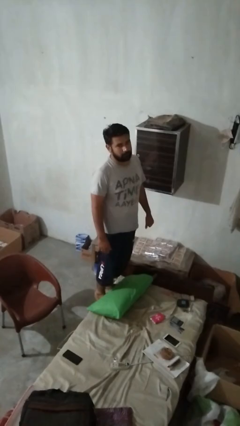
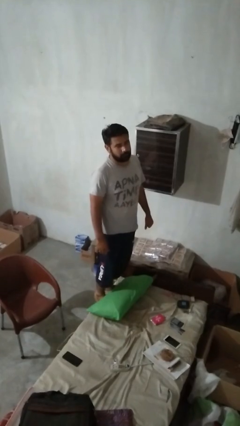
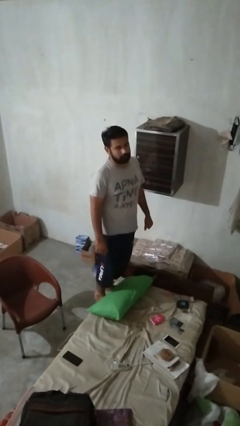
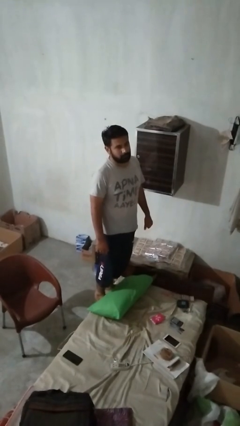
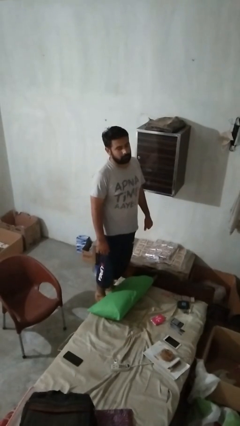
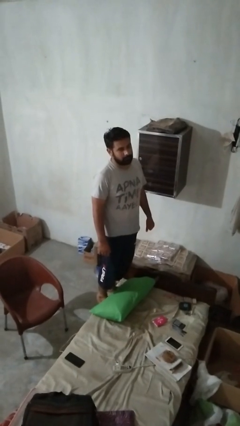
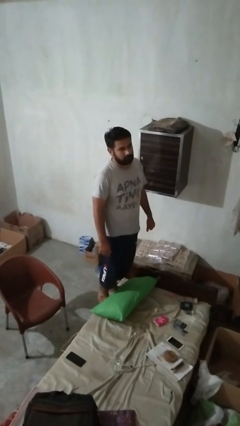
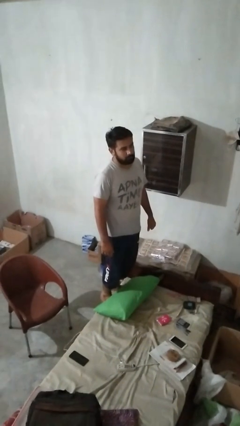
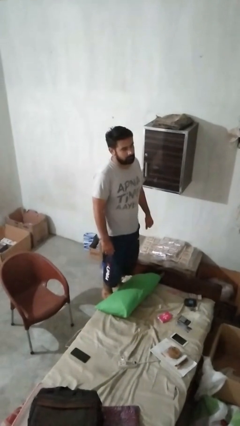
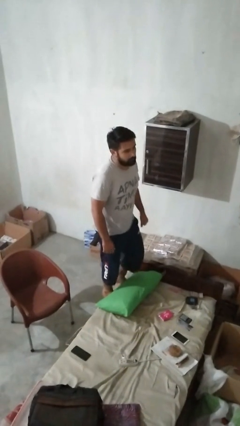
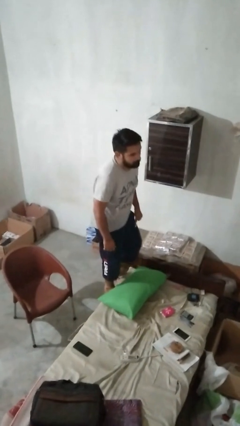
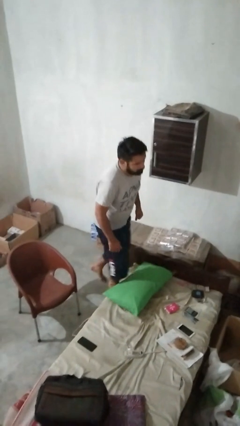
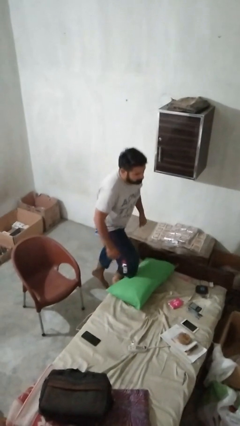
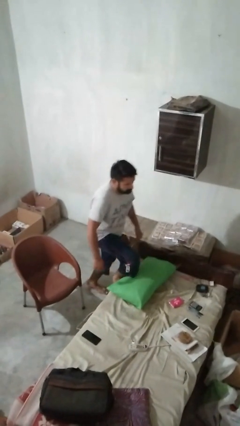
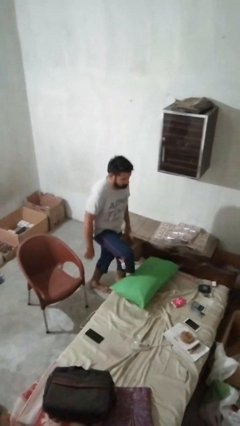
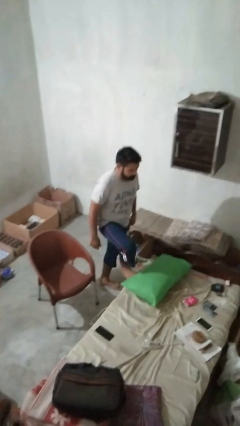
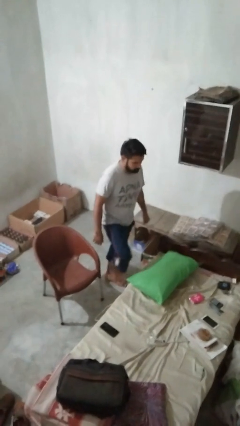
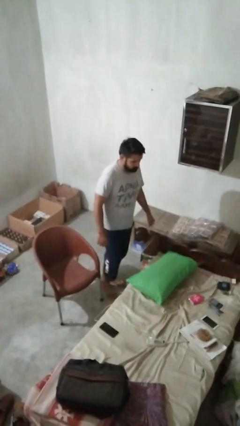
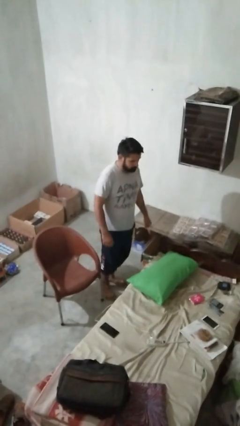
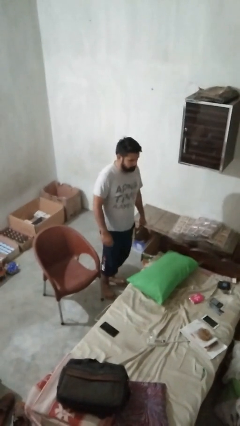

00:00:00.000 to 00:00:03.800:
person climbs off couch

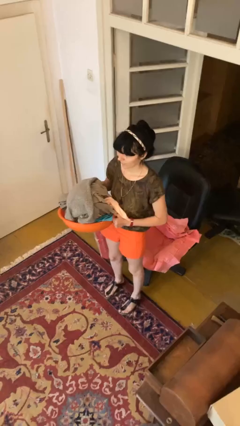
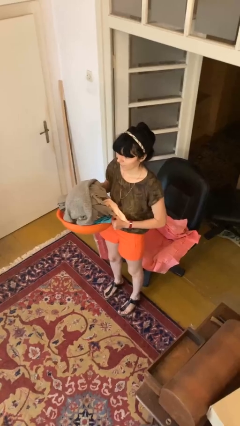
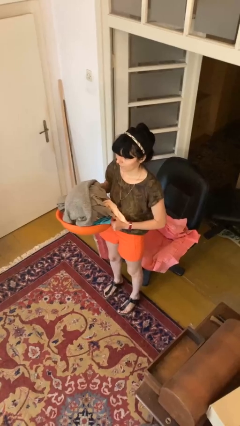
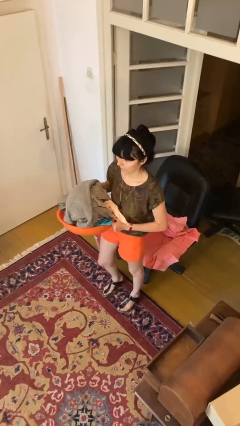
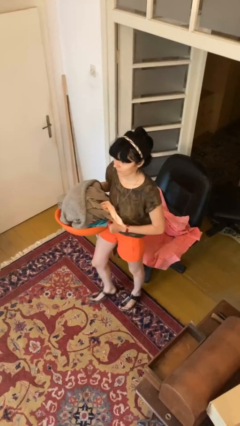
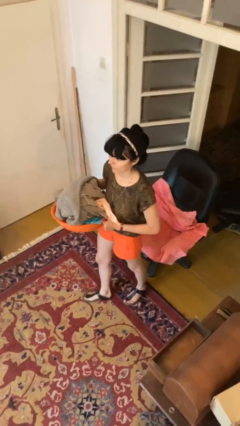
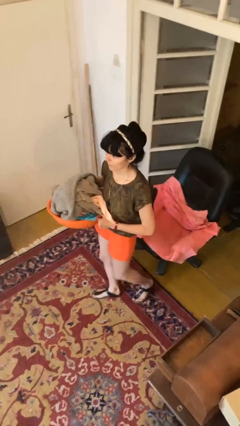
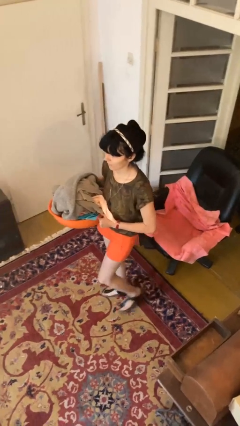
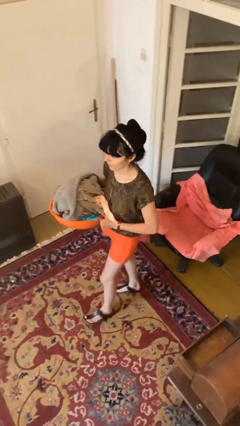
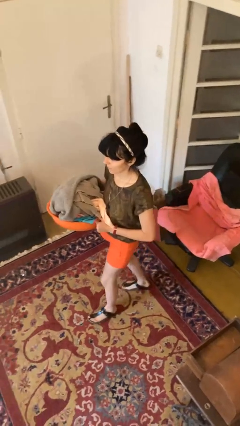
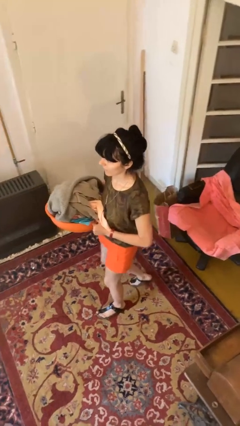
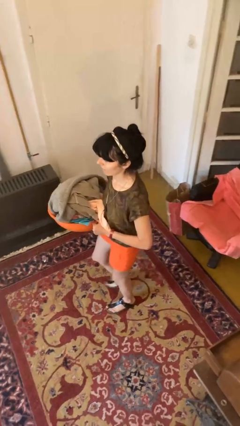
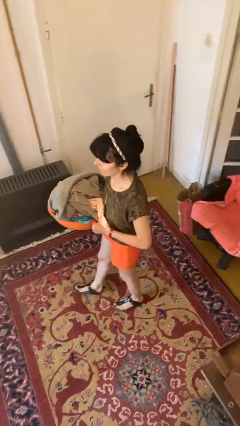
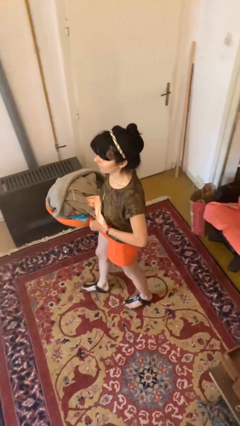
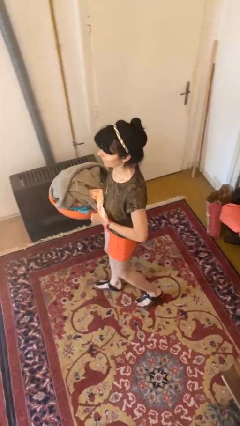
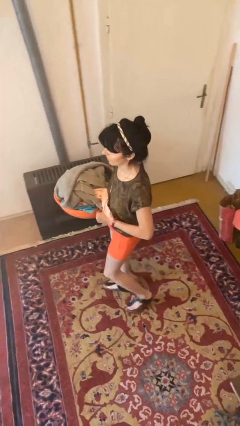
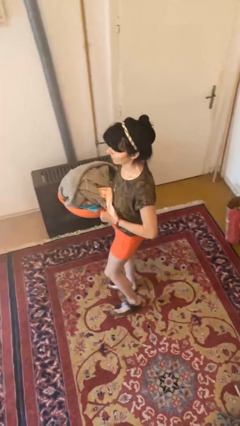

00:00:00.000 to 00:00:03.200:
person carries laundry basket

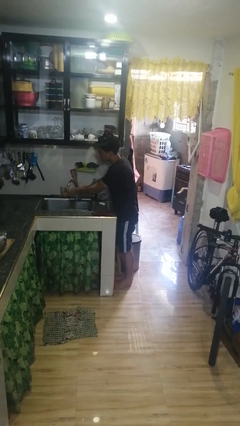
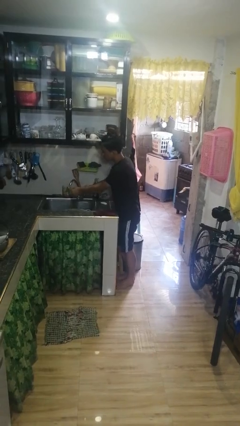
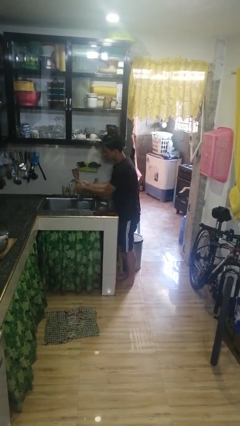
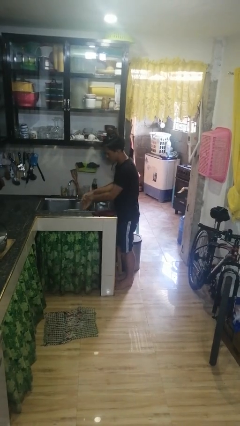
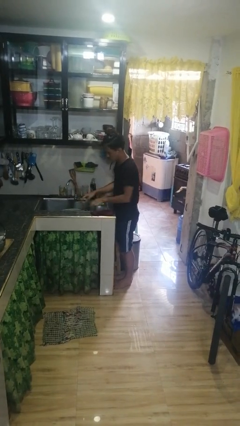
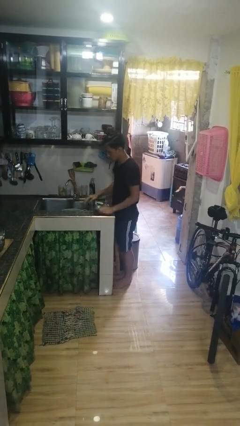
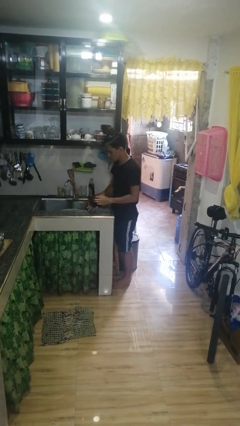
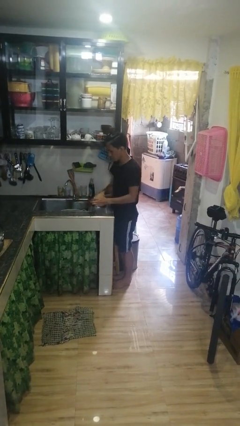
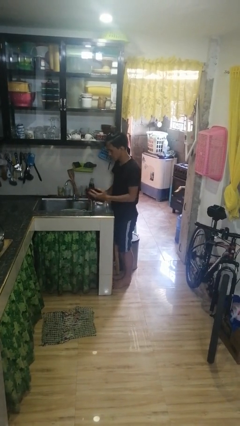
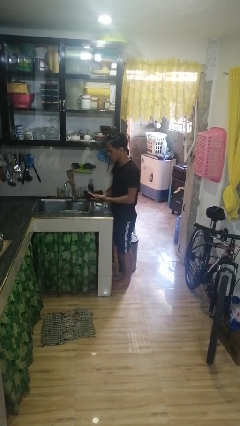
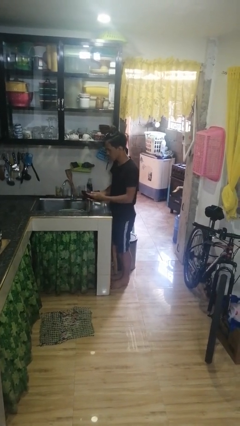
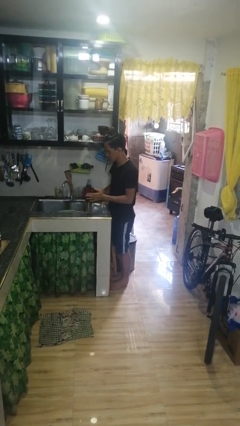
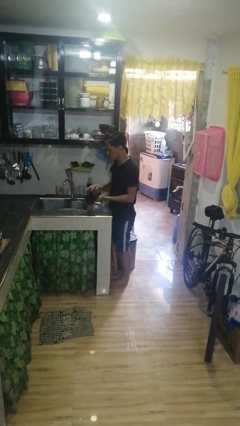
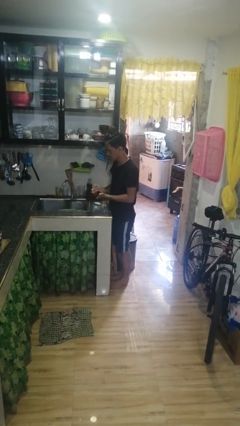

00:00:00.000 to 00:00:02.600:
person dries hands with towel

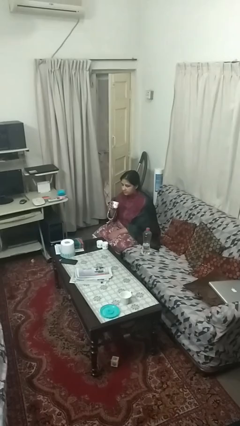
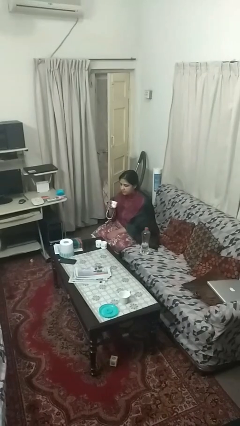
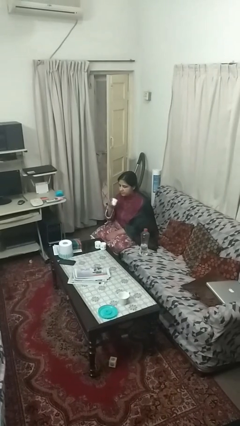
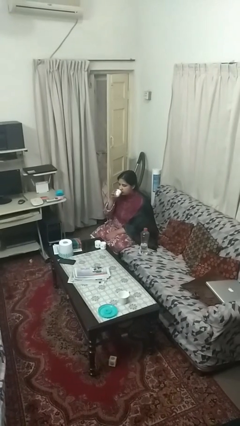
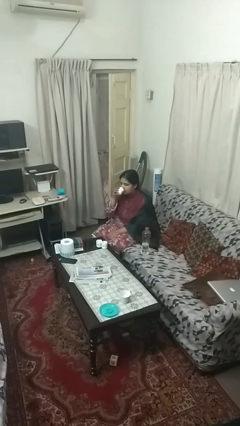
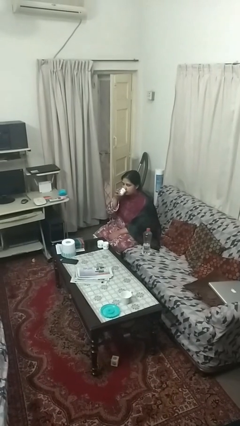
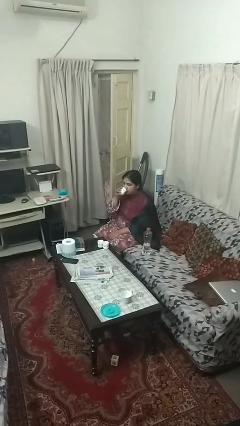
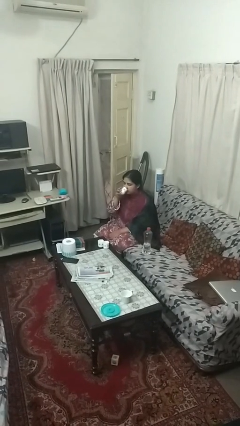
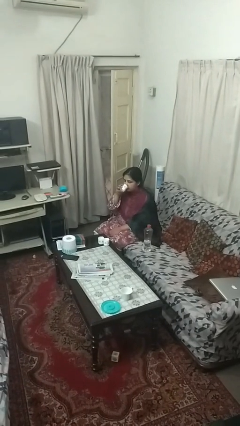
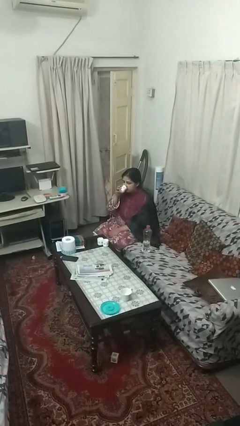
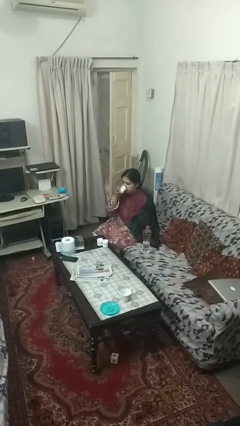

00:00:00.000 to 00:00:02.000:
person drinks from shotglass

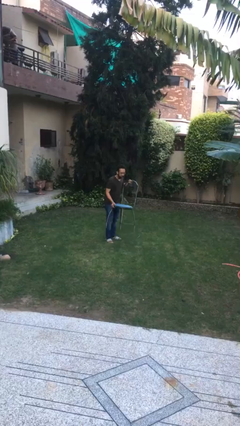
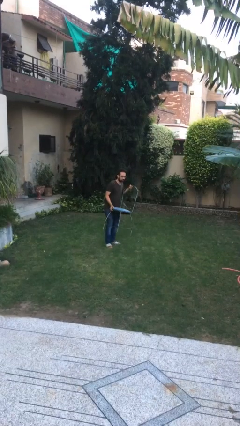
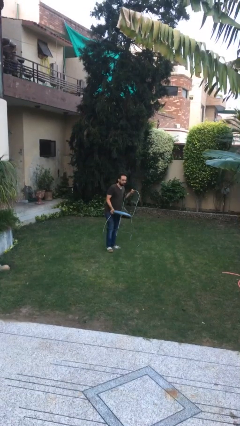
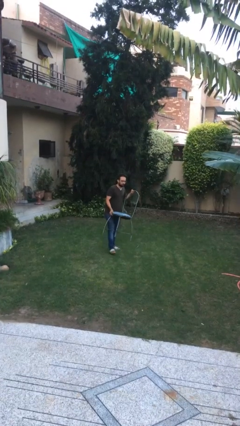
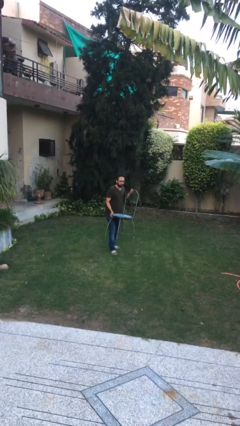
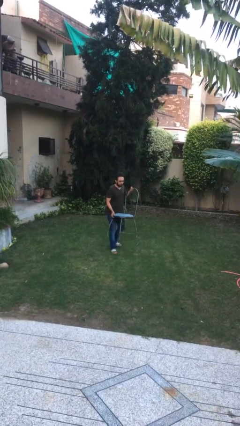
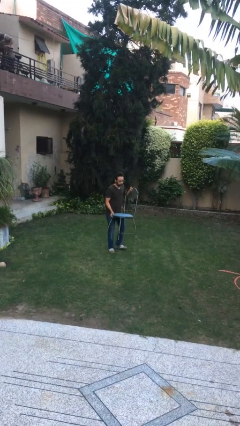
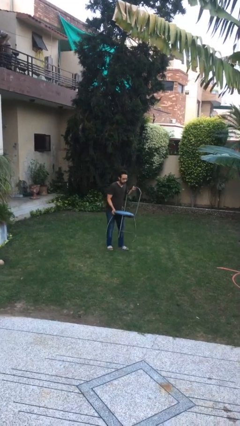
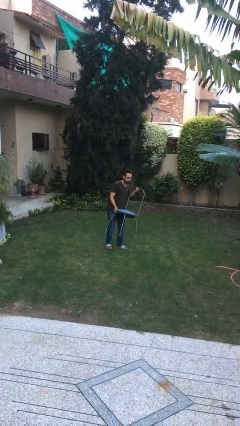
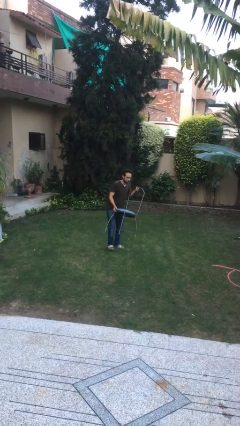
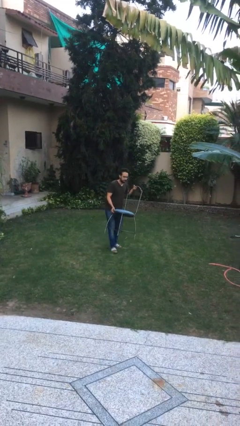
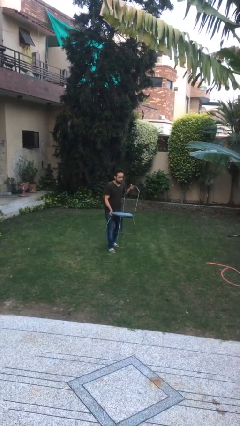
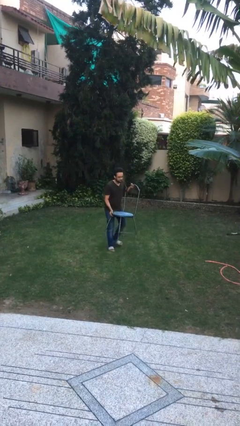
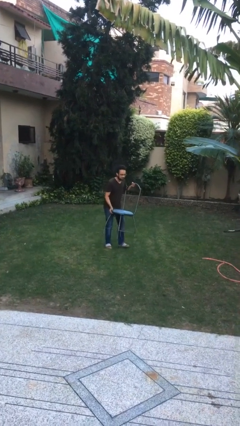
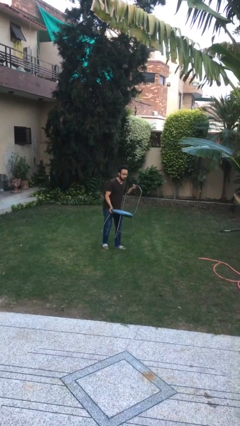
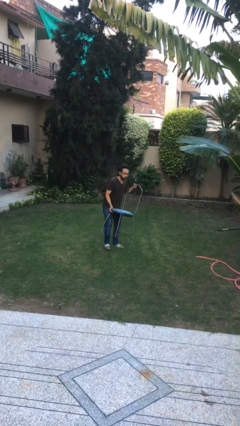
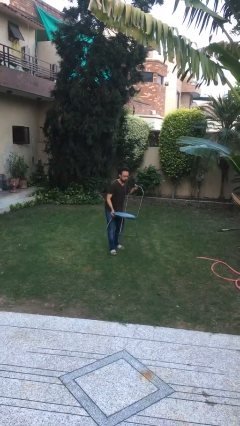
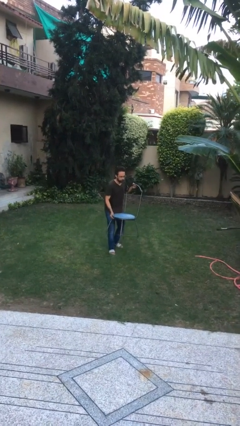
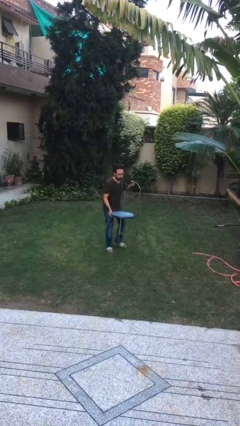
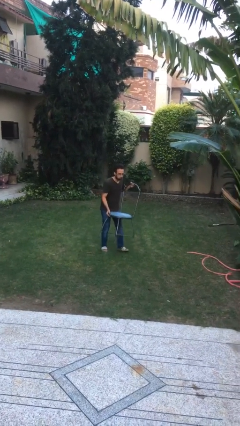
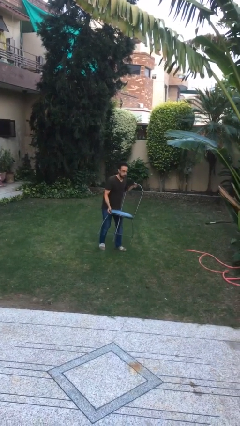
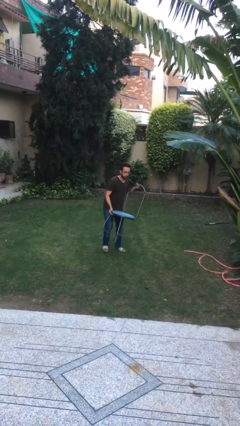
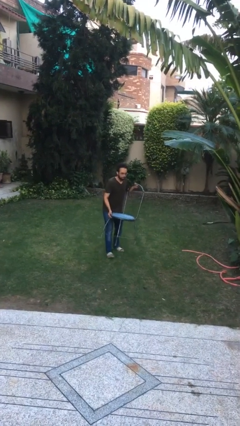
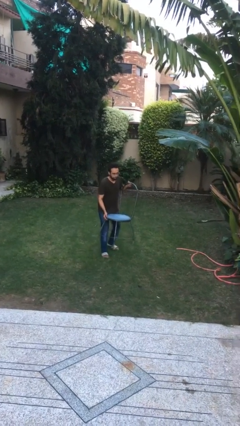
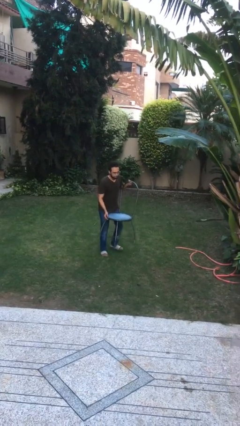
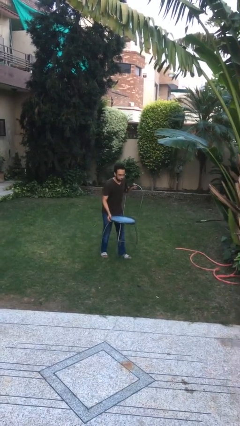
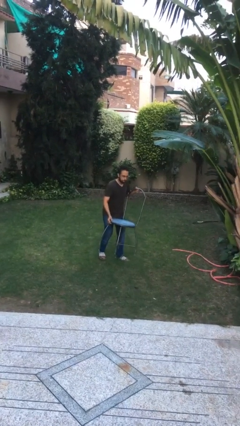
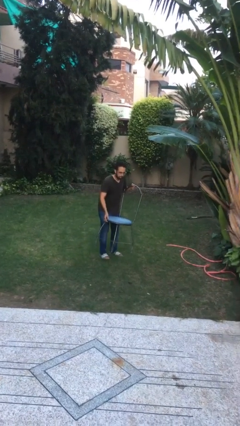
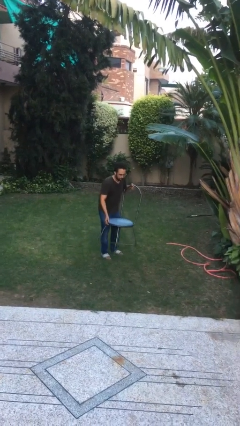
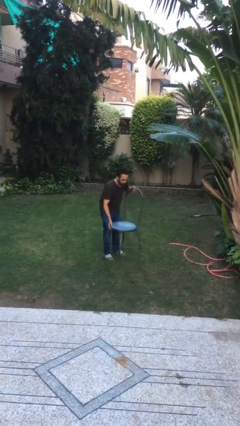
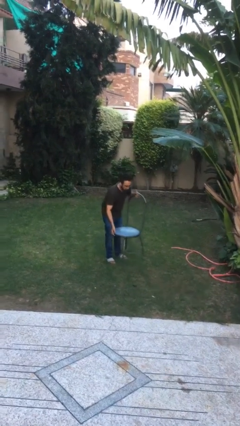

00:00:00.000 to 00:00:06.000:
person carries heavy object
